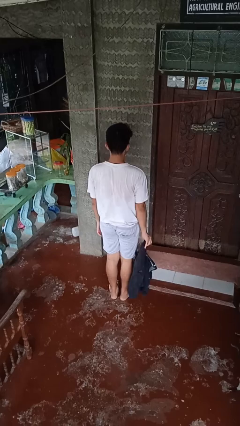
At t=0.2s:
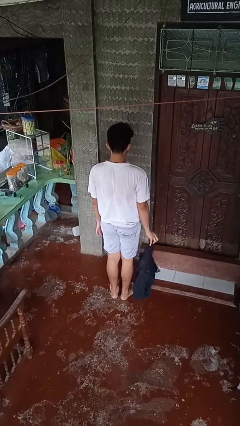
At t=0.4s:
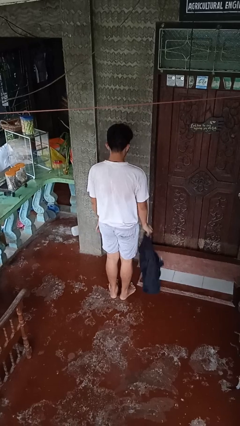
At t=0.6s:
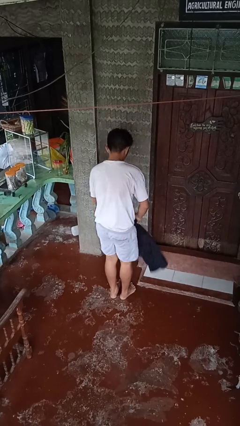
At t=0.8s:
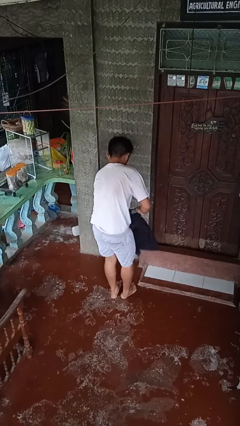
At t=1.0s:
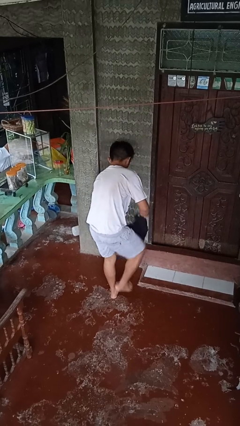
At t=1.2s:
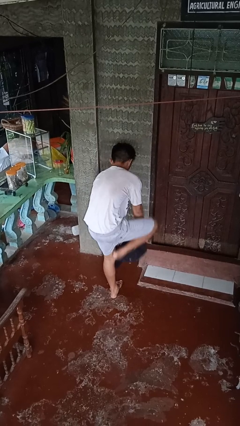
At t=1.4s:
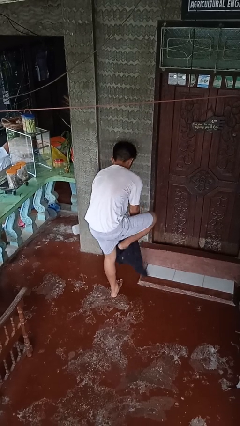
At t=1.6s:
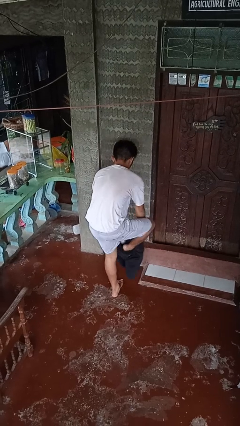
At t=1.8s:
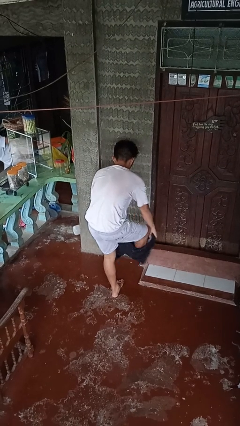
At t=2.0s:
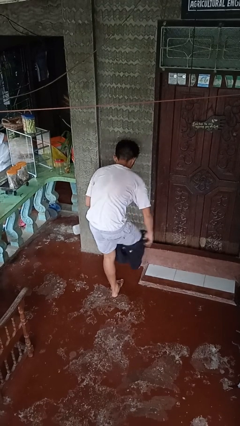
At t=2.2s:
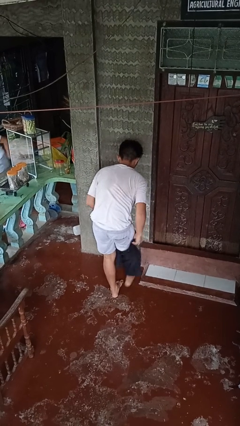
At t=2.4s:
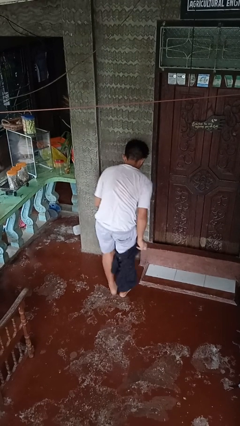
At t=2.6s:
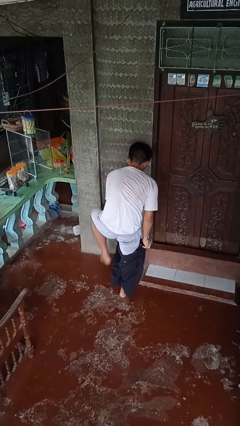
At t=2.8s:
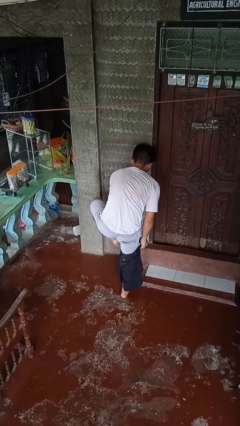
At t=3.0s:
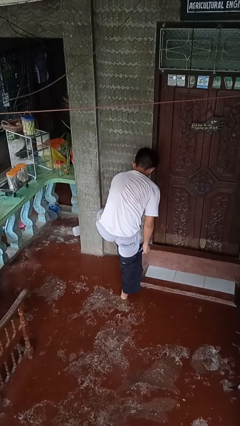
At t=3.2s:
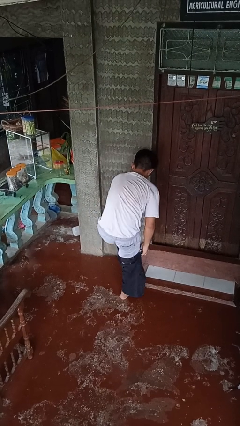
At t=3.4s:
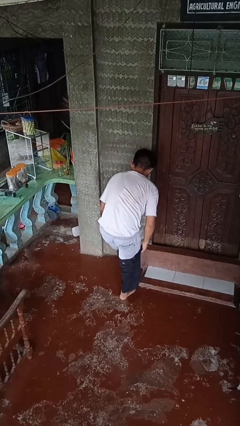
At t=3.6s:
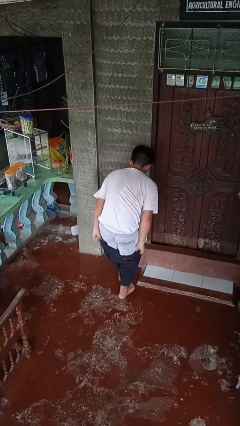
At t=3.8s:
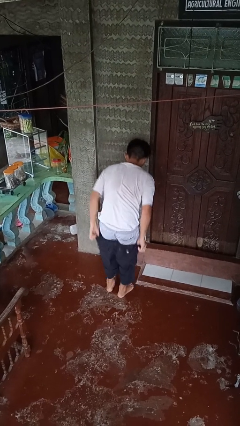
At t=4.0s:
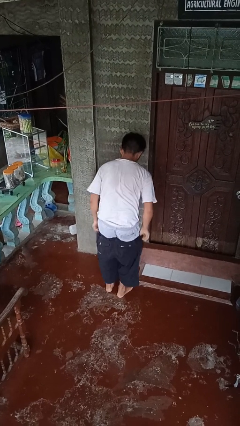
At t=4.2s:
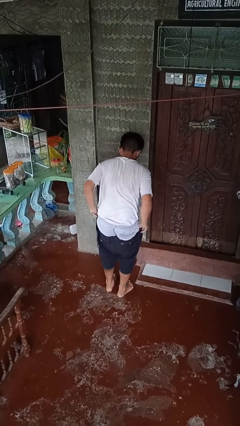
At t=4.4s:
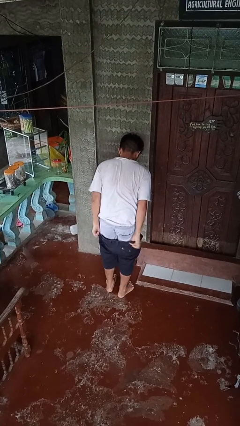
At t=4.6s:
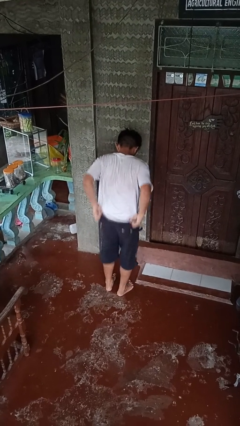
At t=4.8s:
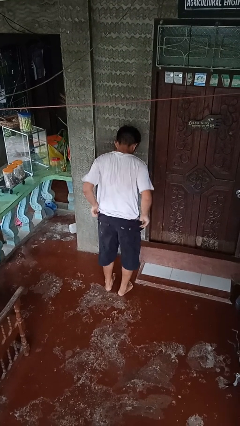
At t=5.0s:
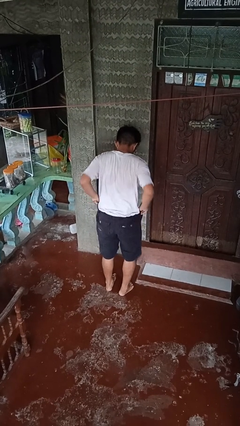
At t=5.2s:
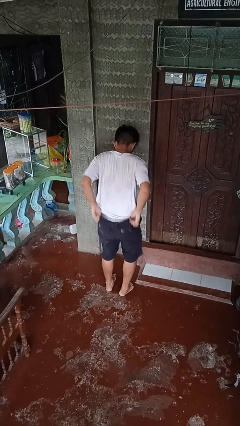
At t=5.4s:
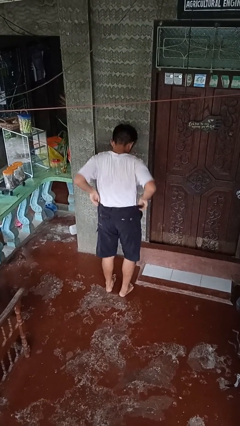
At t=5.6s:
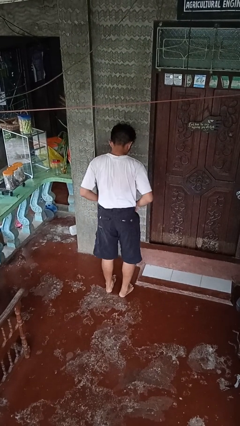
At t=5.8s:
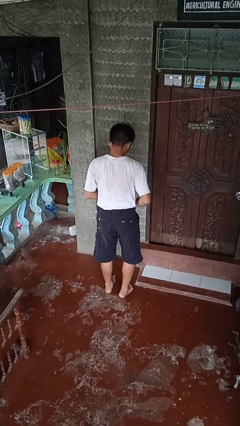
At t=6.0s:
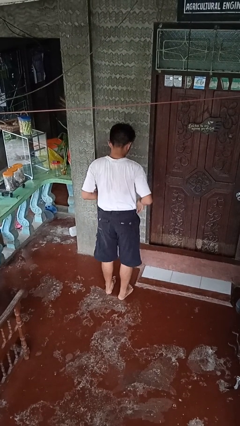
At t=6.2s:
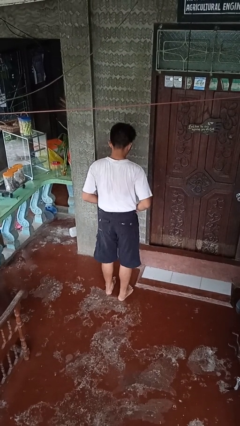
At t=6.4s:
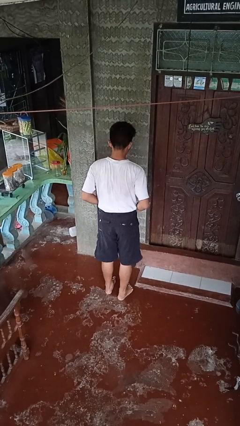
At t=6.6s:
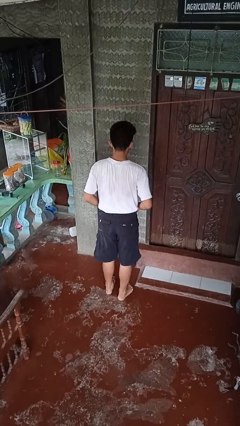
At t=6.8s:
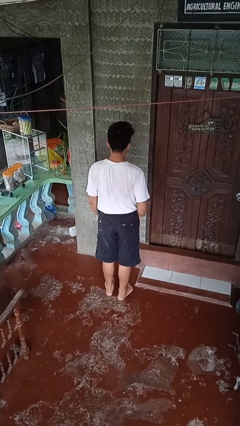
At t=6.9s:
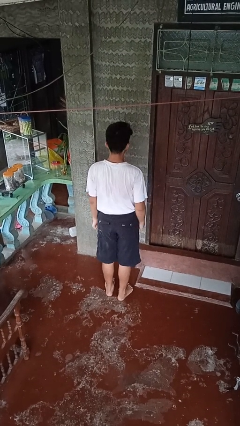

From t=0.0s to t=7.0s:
person puts on pants

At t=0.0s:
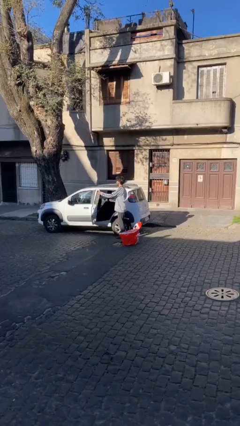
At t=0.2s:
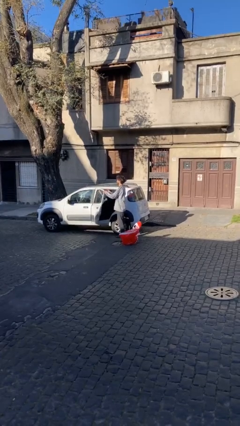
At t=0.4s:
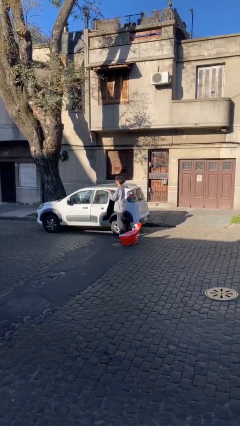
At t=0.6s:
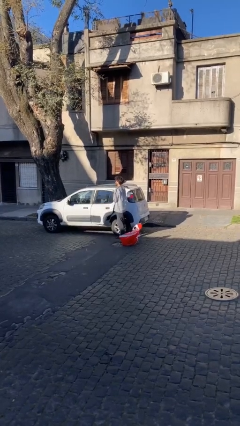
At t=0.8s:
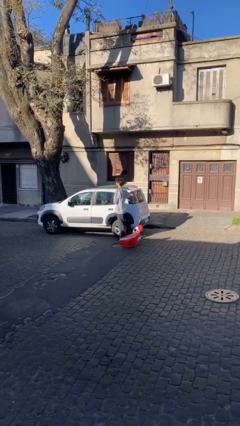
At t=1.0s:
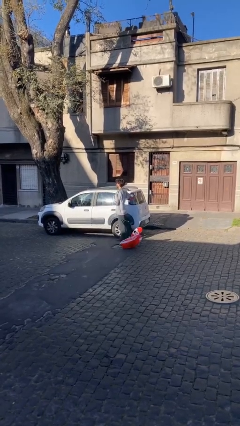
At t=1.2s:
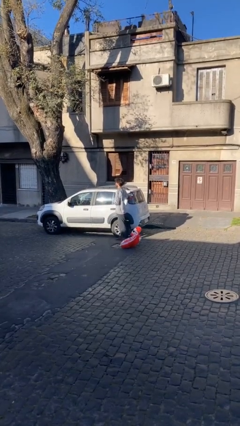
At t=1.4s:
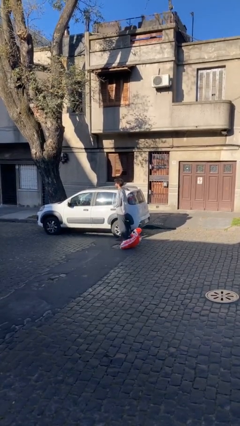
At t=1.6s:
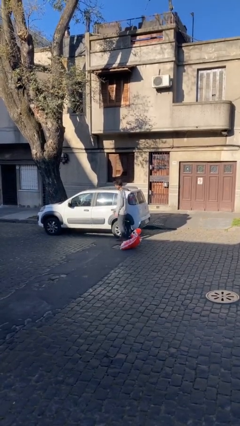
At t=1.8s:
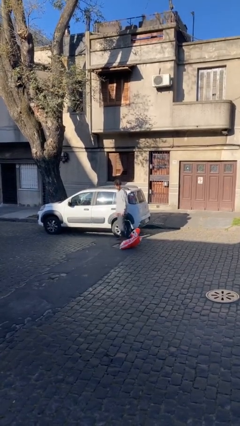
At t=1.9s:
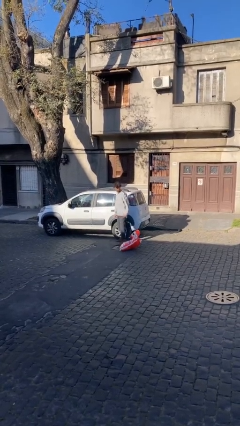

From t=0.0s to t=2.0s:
person closes car door

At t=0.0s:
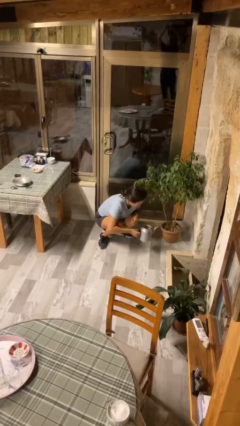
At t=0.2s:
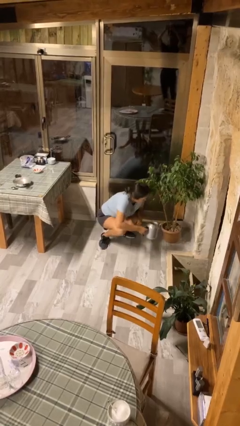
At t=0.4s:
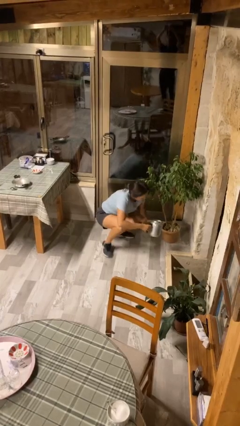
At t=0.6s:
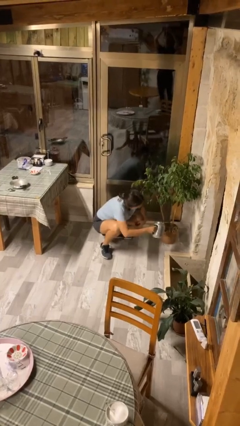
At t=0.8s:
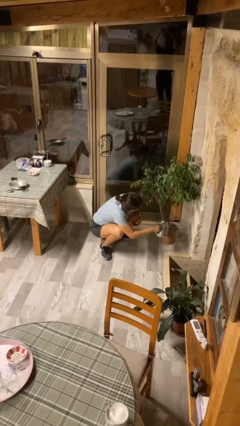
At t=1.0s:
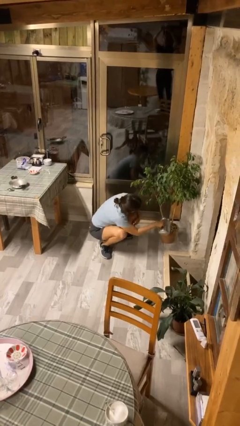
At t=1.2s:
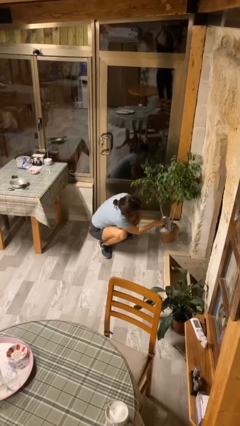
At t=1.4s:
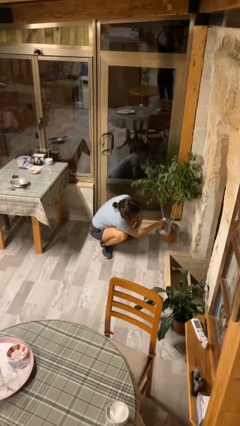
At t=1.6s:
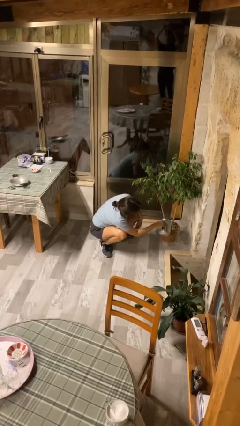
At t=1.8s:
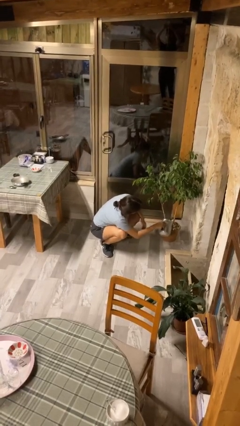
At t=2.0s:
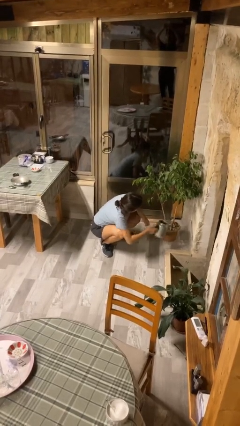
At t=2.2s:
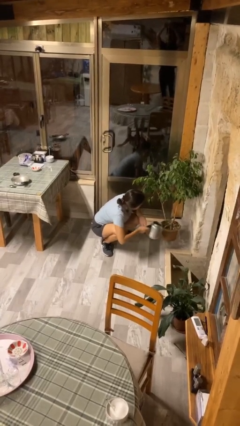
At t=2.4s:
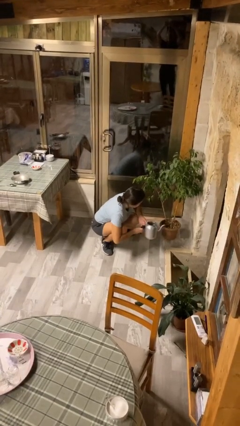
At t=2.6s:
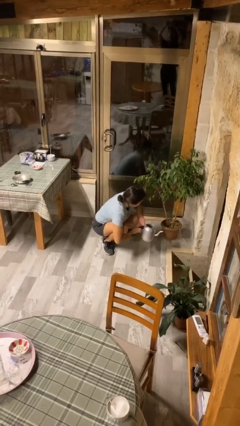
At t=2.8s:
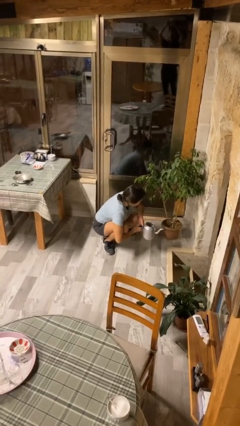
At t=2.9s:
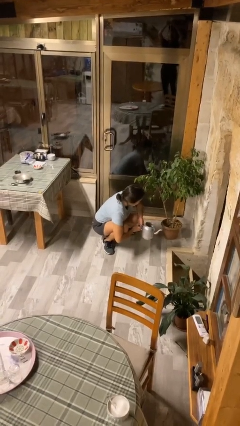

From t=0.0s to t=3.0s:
person waters houseplant

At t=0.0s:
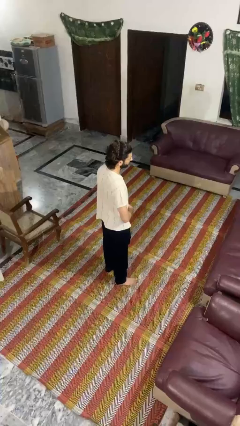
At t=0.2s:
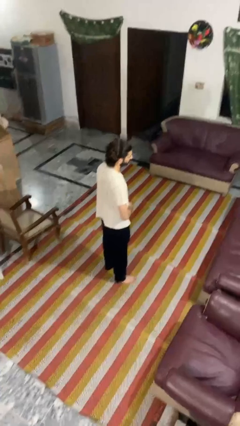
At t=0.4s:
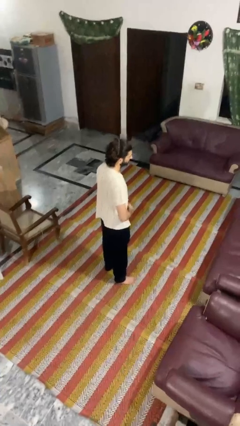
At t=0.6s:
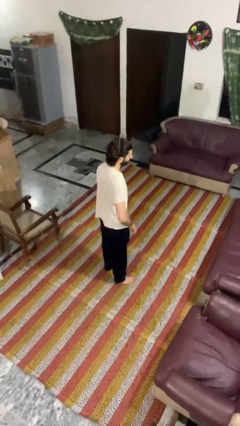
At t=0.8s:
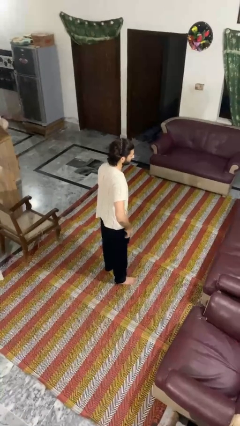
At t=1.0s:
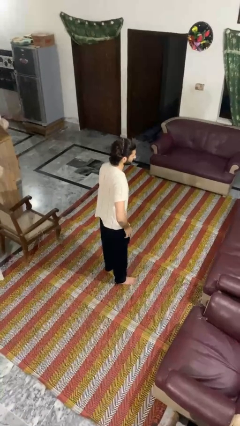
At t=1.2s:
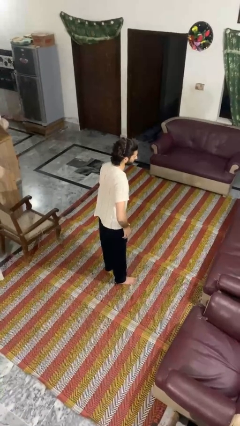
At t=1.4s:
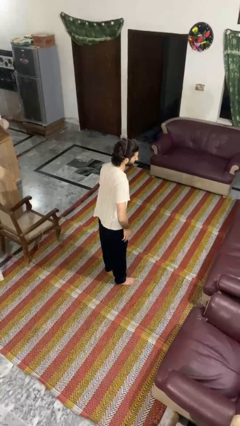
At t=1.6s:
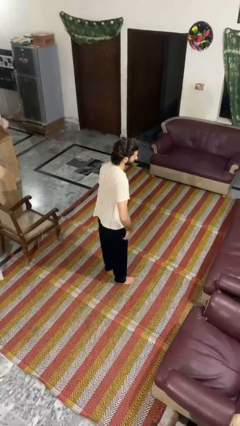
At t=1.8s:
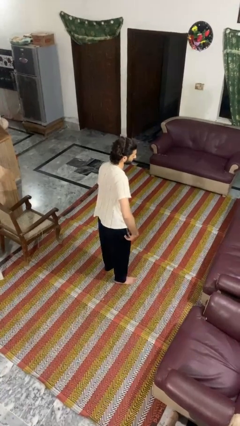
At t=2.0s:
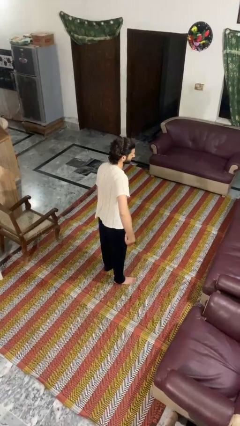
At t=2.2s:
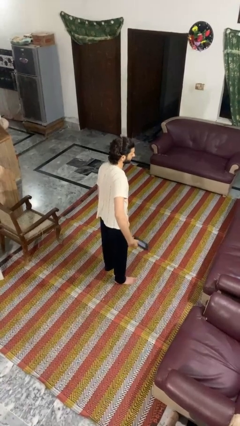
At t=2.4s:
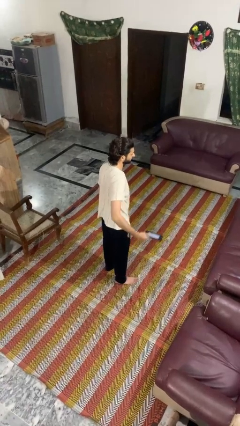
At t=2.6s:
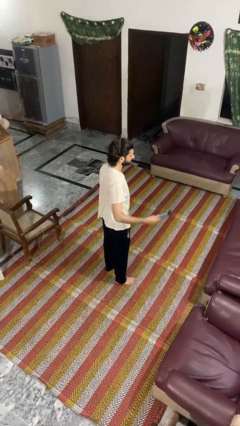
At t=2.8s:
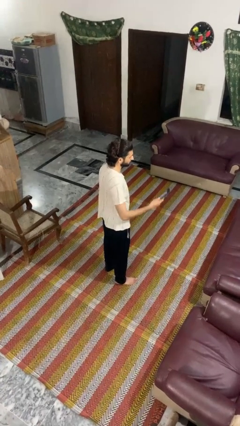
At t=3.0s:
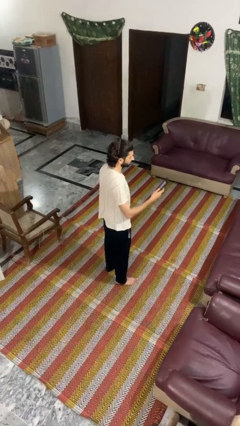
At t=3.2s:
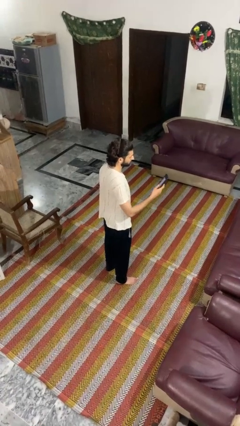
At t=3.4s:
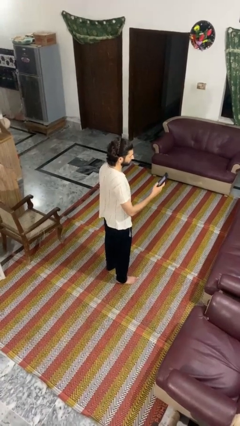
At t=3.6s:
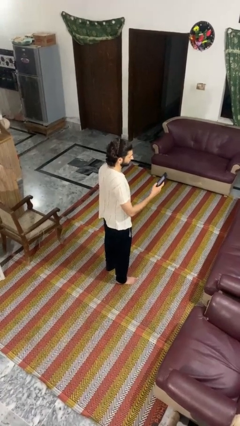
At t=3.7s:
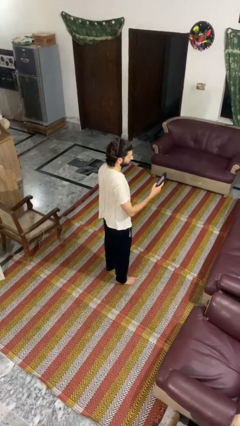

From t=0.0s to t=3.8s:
person takes phone from pocket

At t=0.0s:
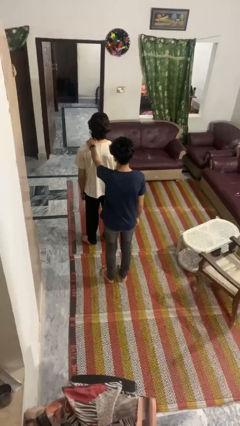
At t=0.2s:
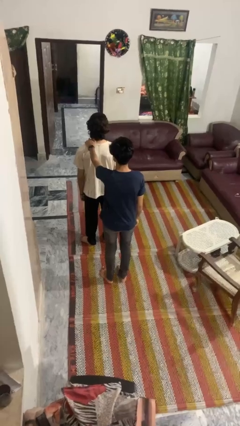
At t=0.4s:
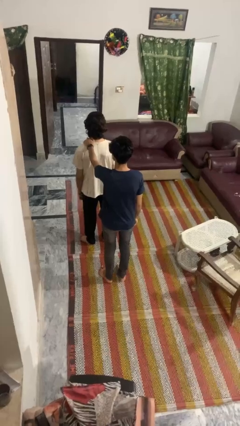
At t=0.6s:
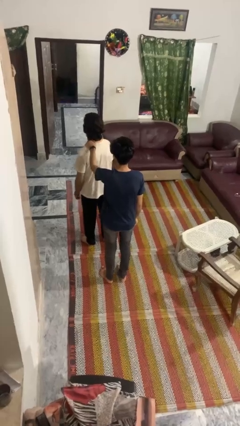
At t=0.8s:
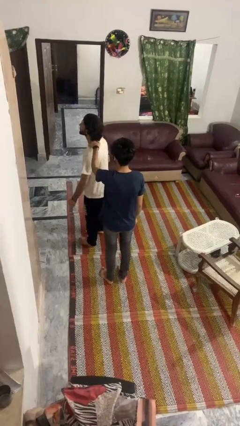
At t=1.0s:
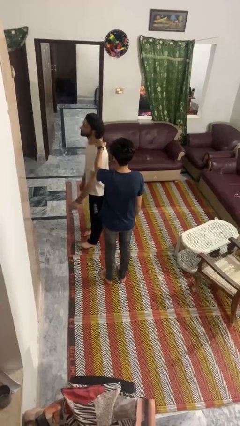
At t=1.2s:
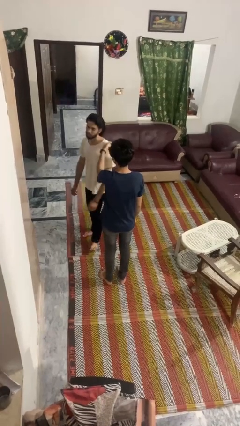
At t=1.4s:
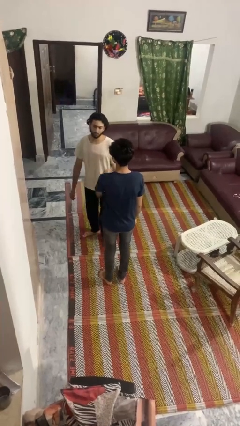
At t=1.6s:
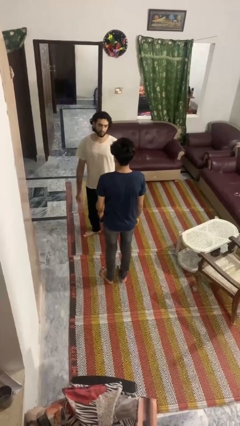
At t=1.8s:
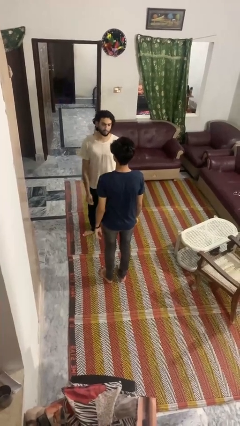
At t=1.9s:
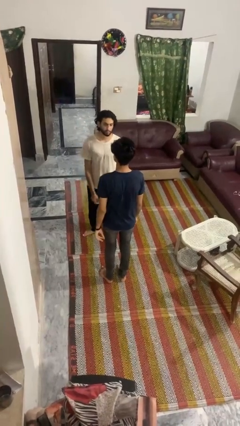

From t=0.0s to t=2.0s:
person spins person around
